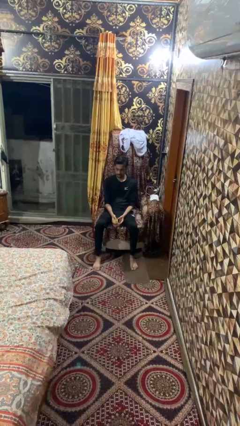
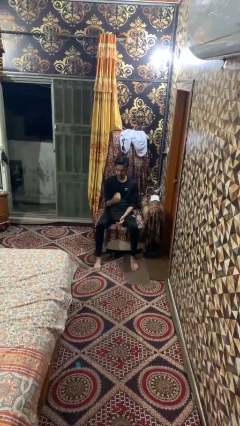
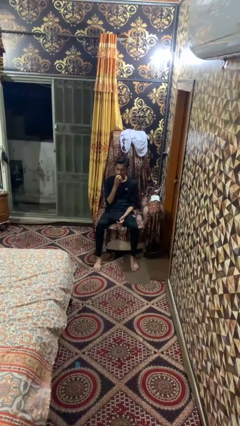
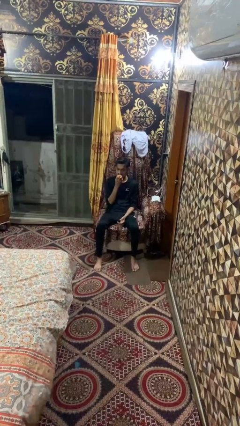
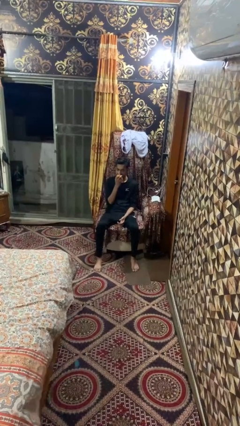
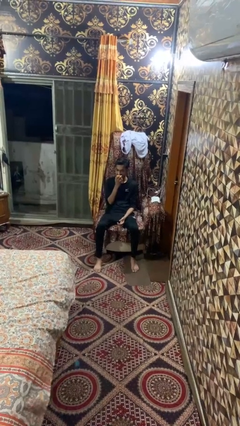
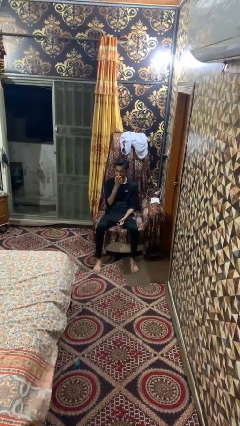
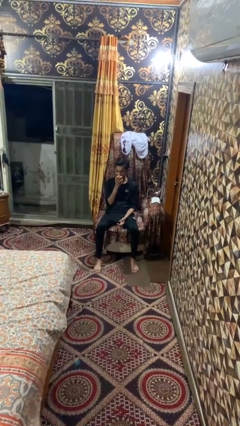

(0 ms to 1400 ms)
person eats apple

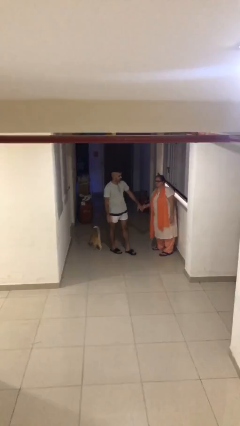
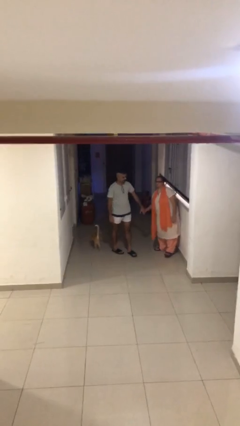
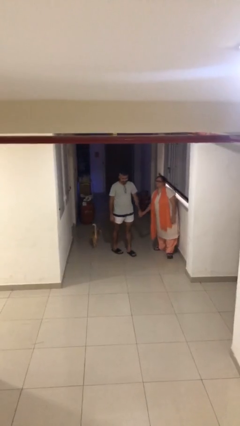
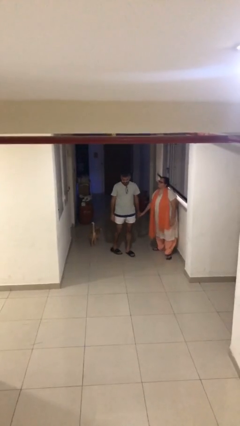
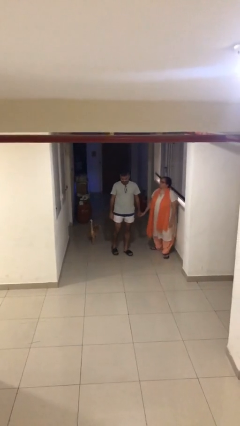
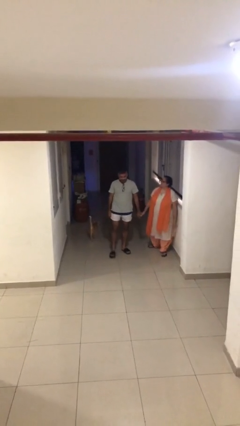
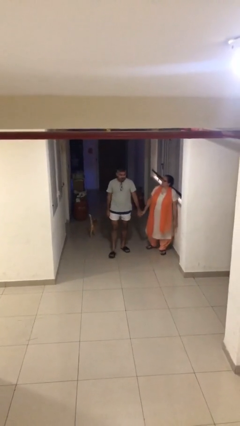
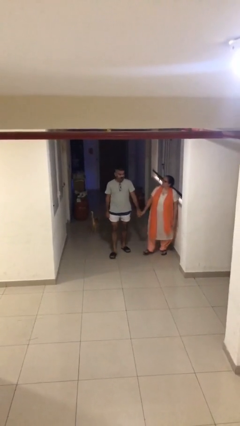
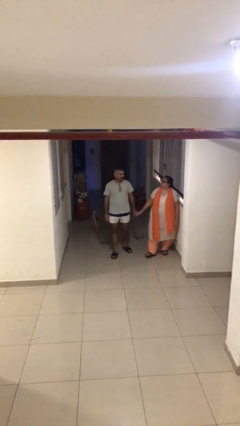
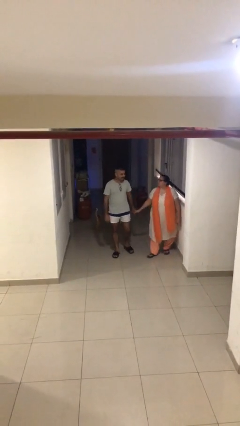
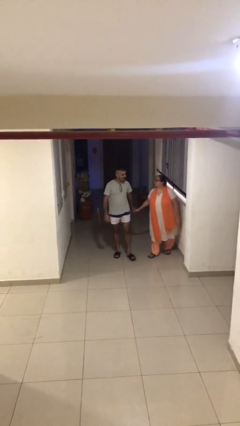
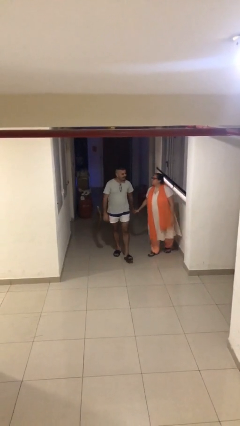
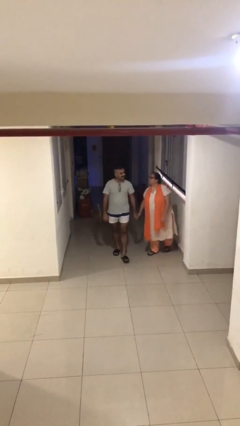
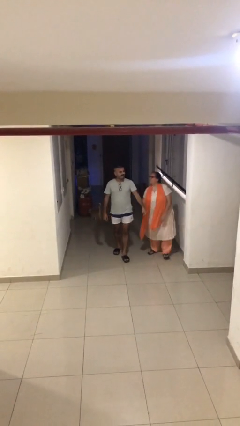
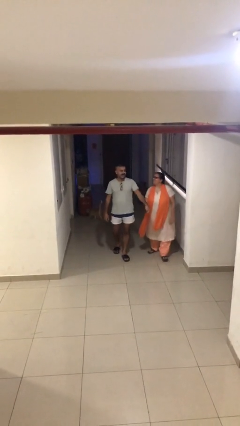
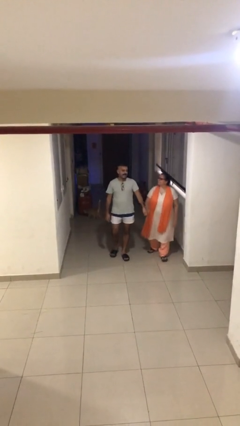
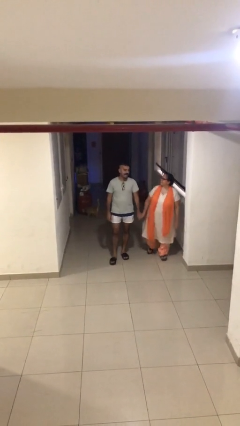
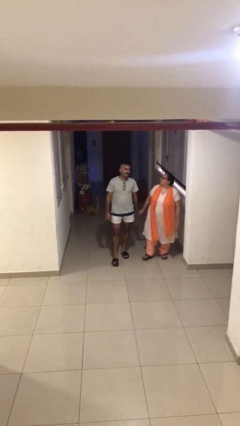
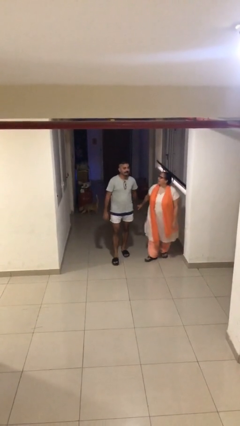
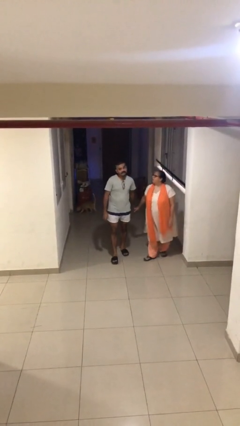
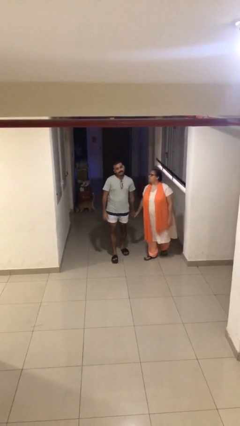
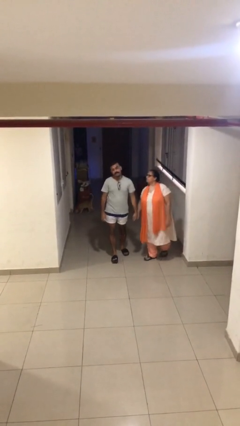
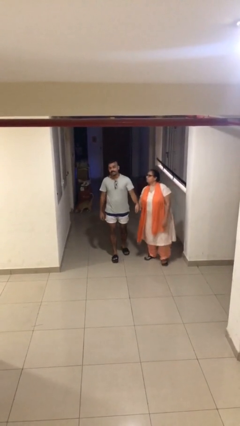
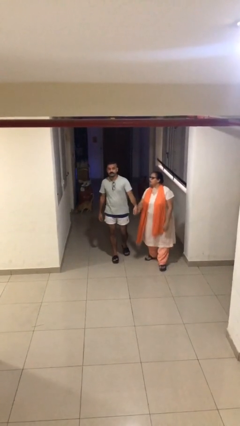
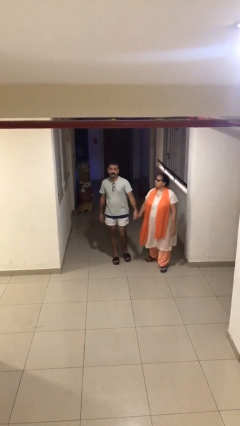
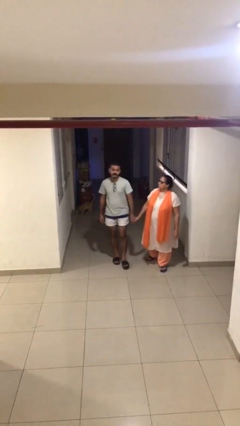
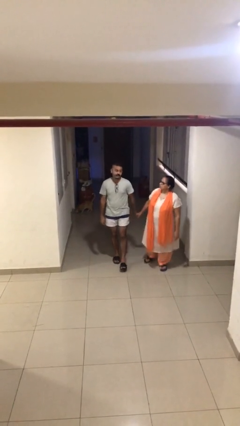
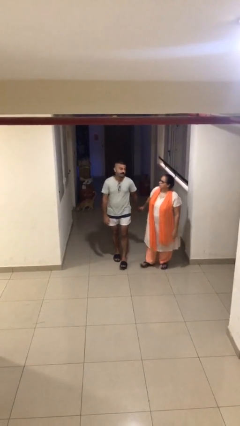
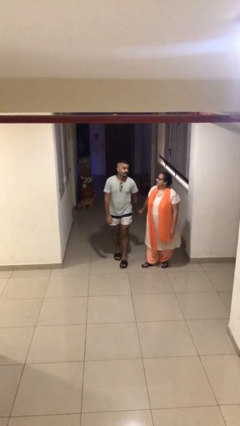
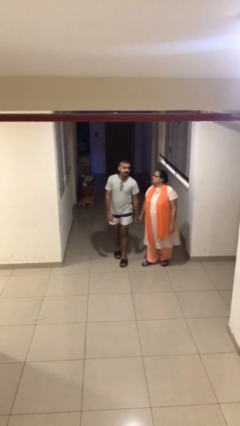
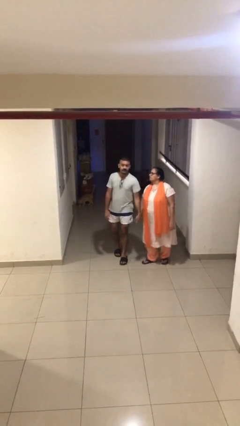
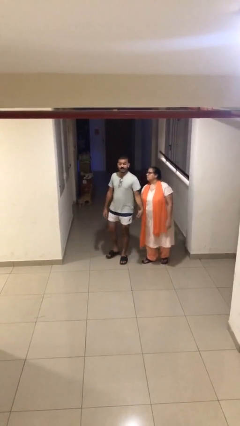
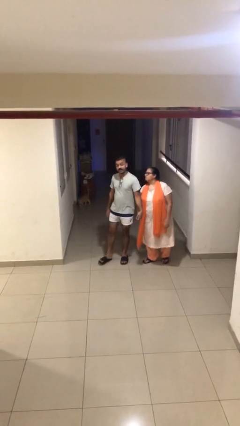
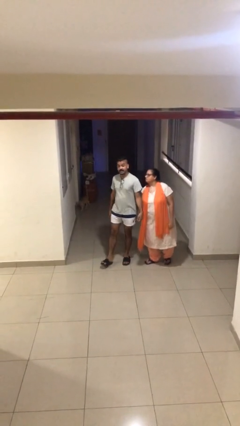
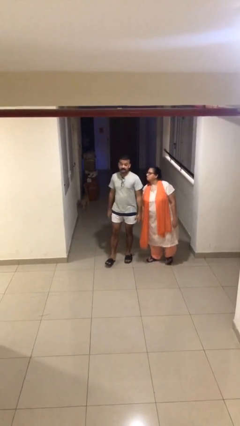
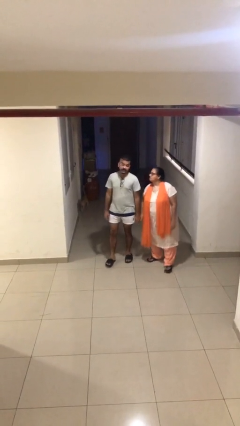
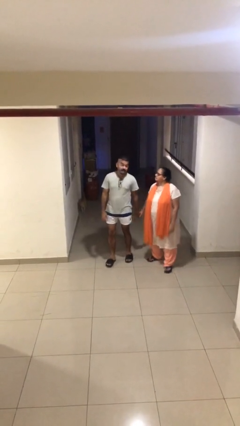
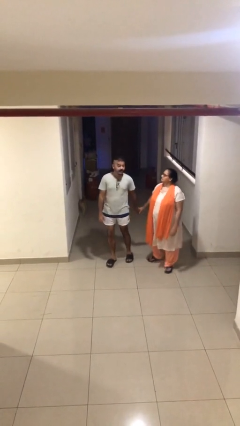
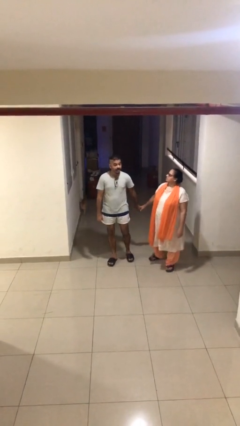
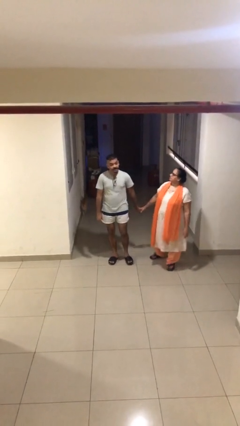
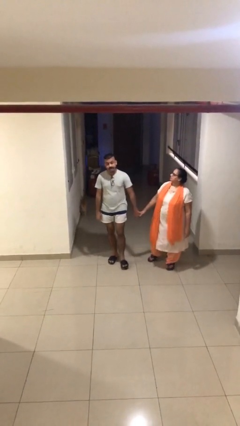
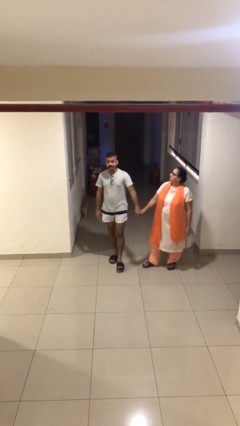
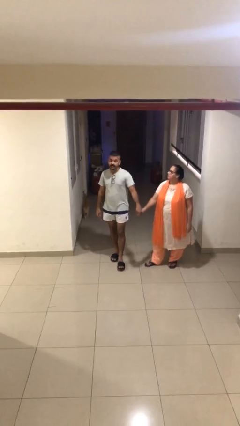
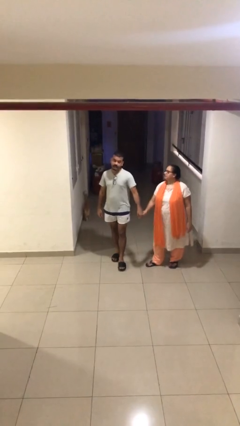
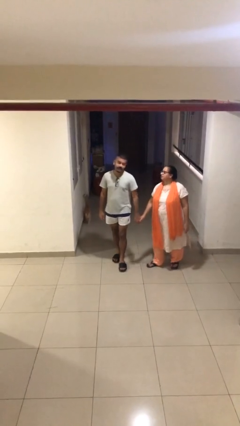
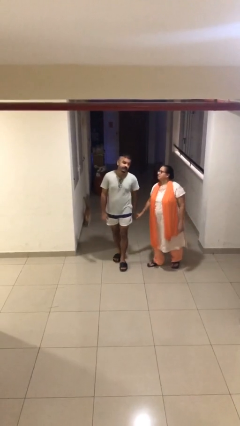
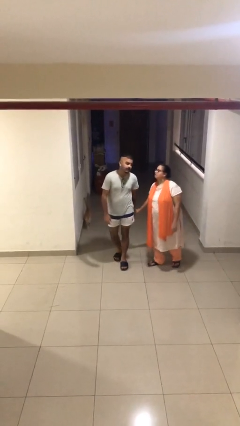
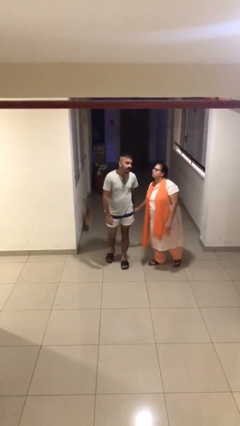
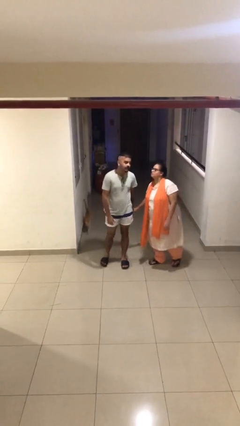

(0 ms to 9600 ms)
person holds hand

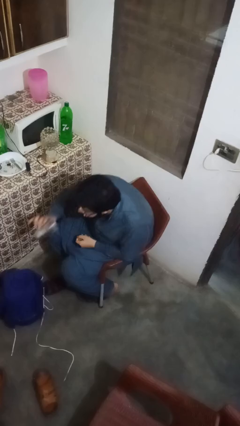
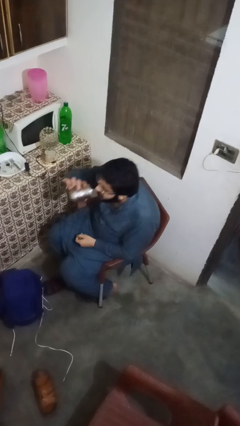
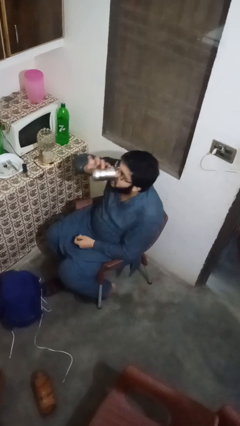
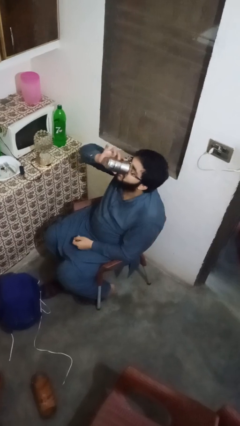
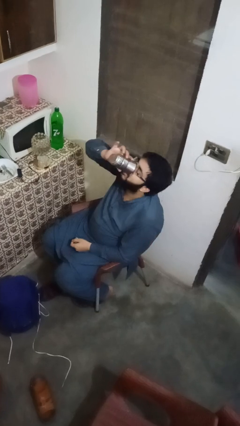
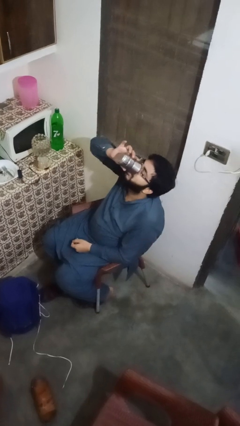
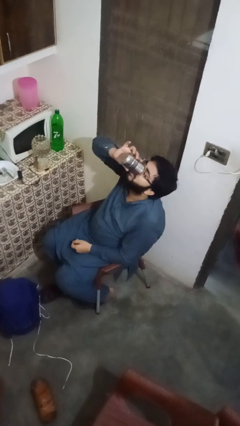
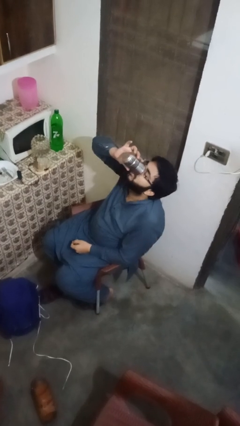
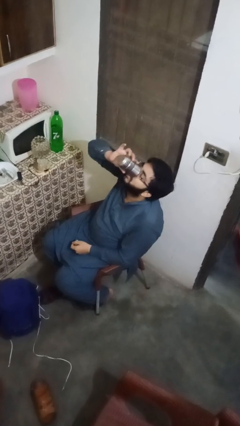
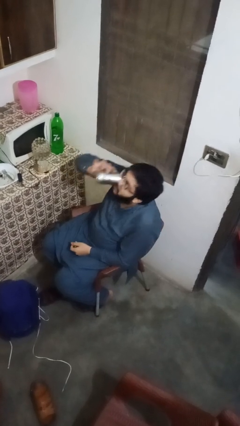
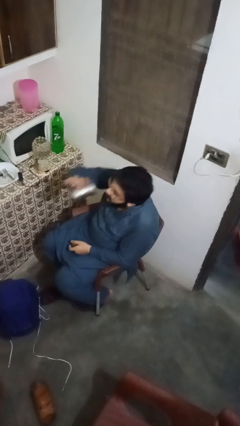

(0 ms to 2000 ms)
person drinks from cup

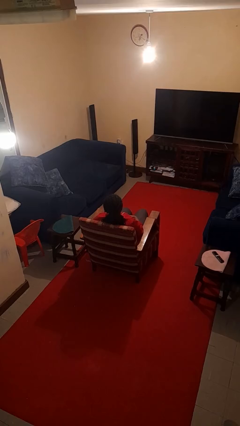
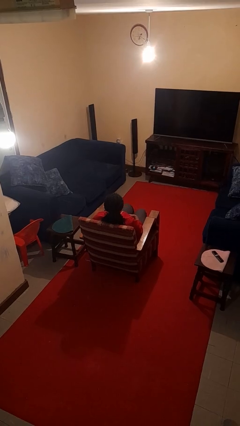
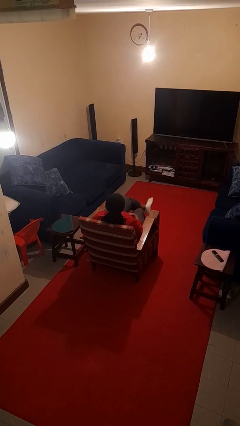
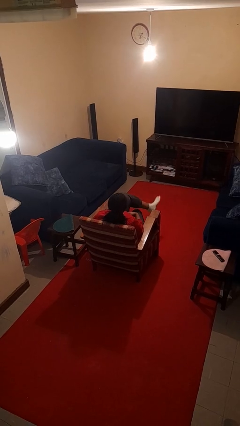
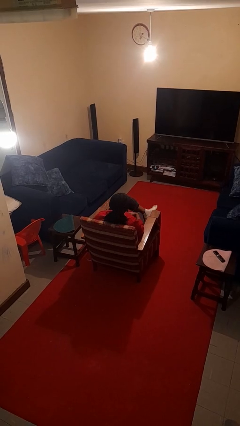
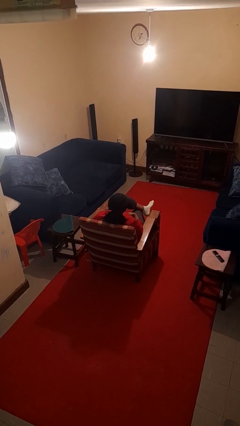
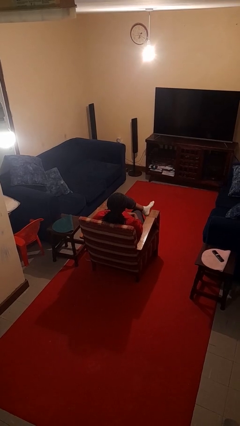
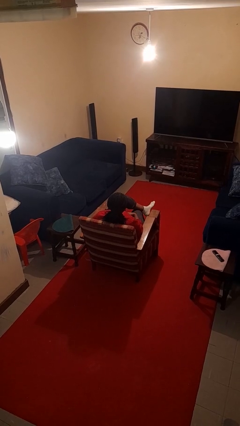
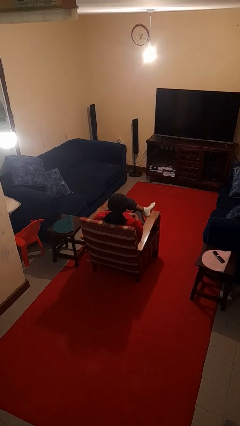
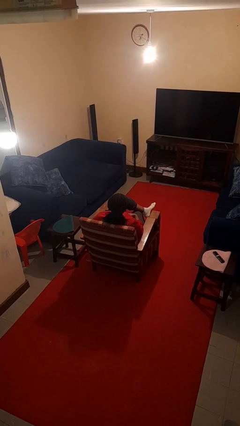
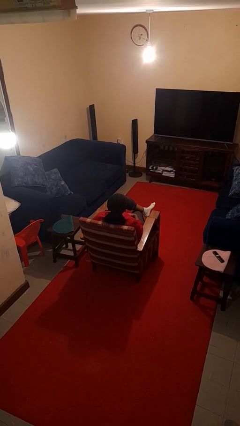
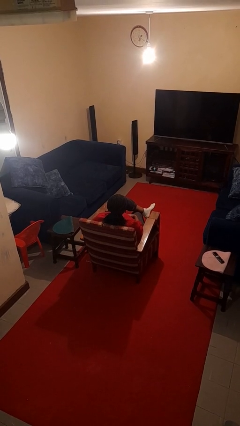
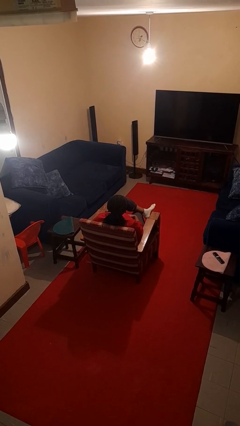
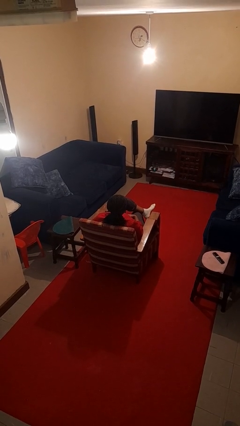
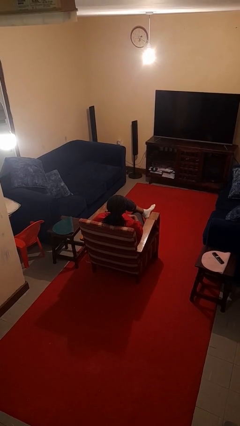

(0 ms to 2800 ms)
person crosses legs

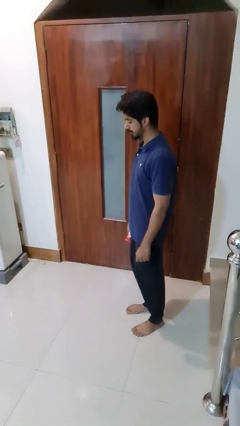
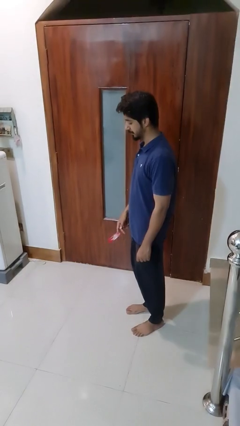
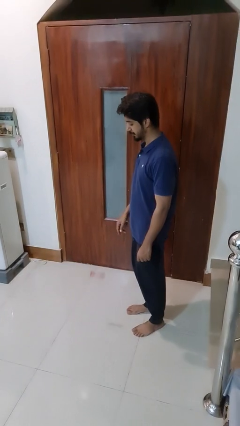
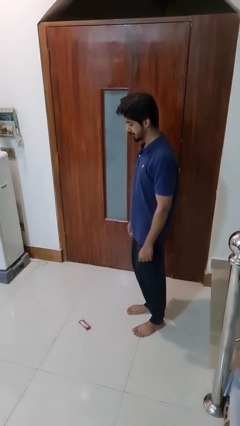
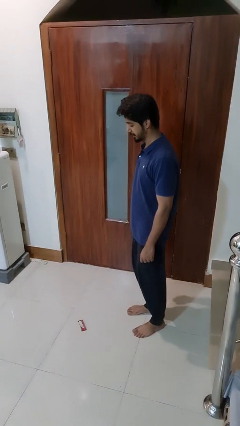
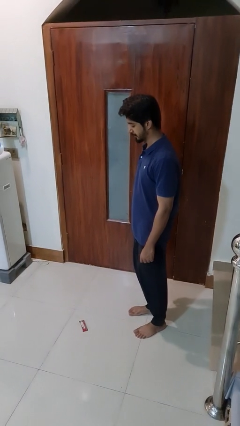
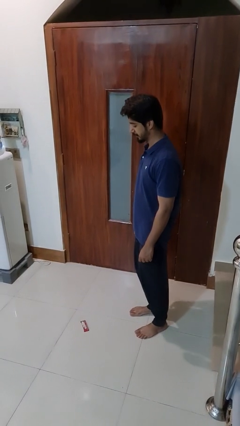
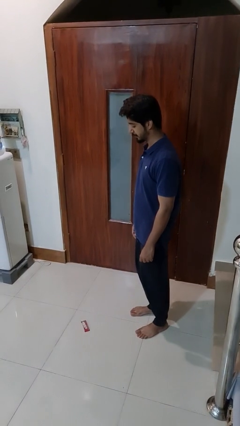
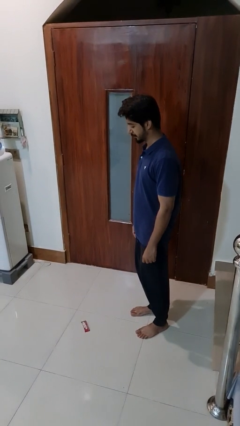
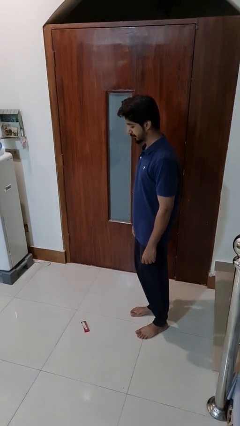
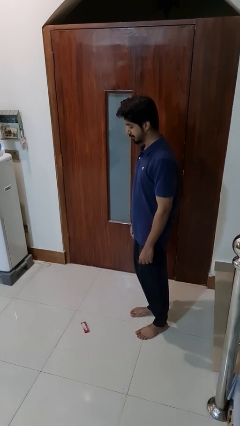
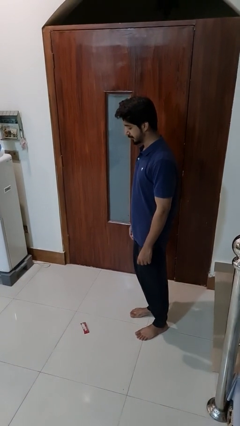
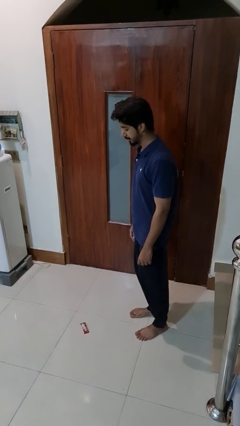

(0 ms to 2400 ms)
person throws object to ground
